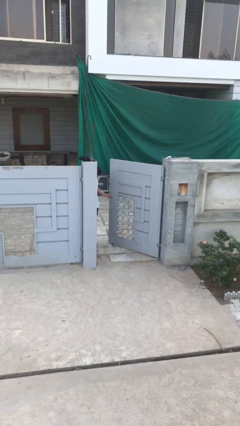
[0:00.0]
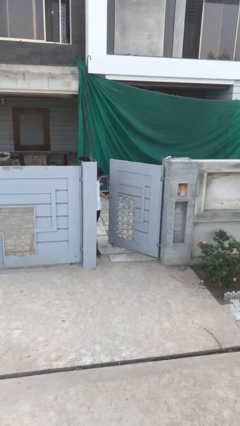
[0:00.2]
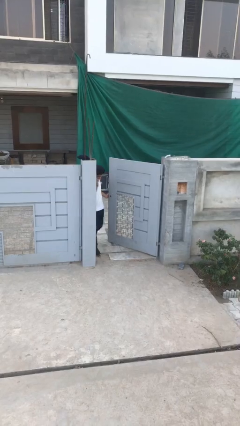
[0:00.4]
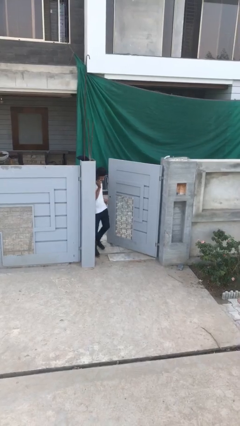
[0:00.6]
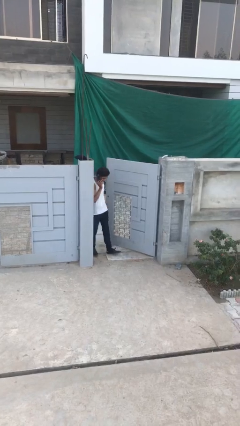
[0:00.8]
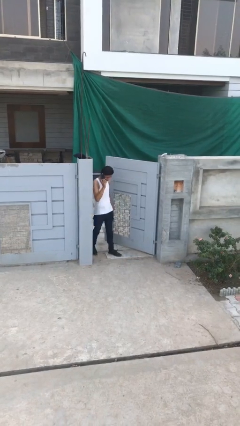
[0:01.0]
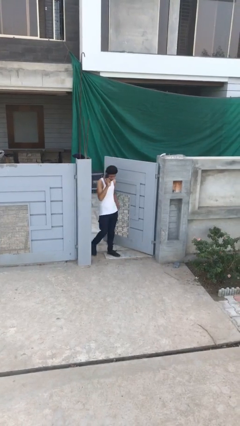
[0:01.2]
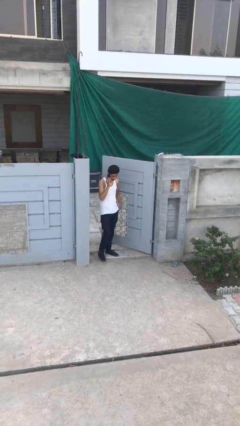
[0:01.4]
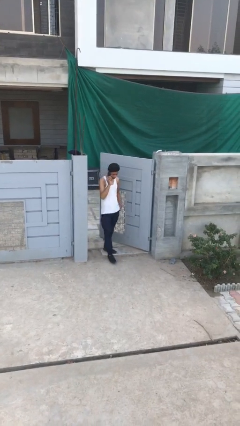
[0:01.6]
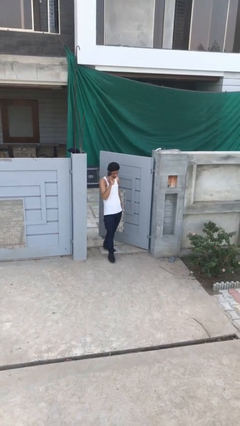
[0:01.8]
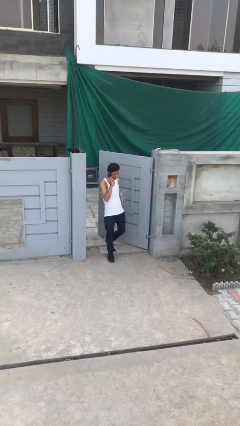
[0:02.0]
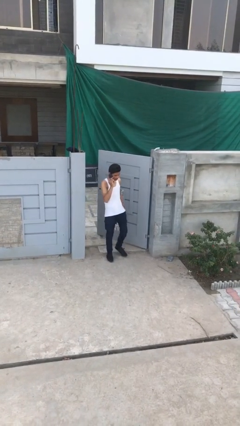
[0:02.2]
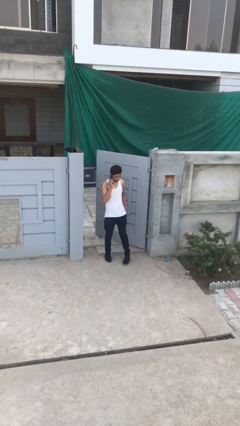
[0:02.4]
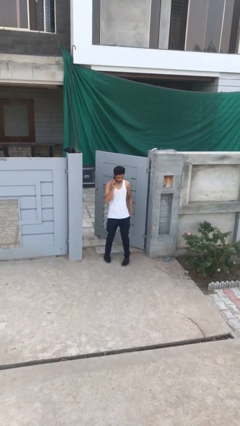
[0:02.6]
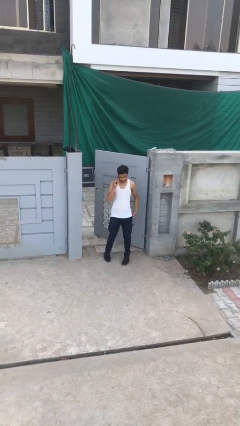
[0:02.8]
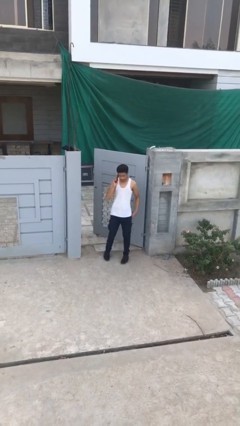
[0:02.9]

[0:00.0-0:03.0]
person enters scene through structure

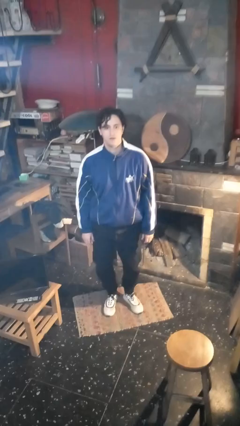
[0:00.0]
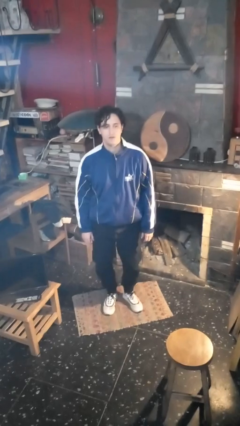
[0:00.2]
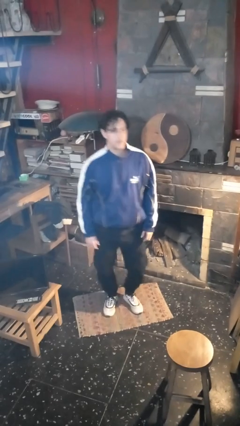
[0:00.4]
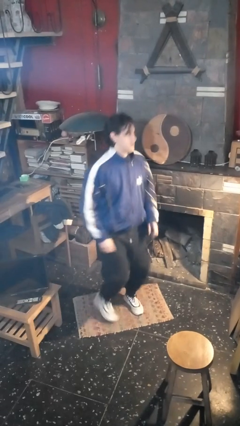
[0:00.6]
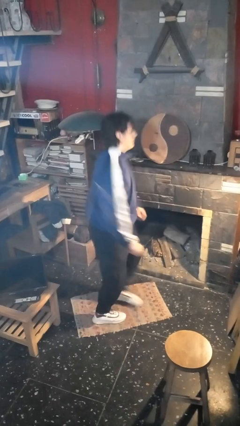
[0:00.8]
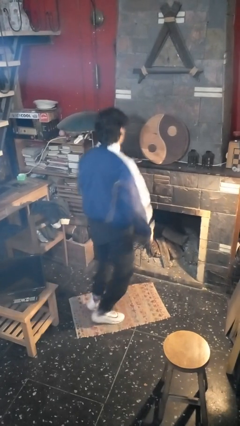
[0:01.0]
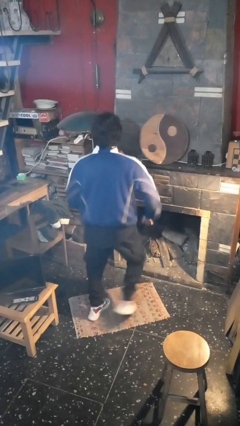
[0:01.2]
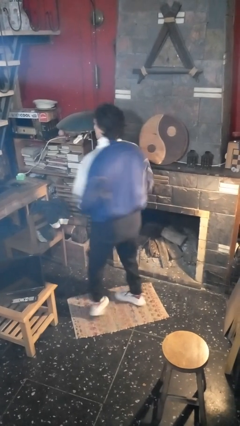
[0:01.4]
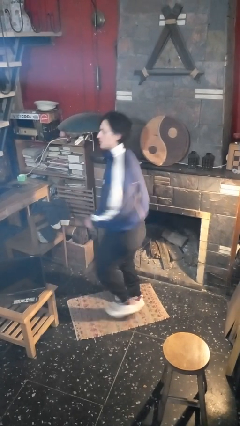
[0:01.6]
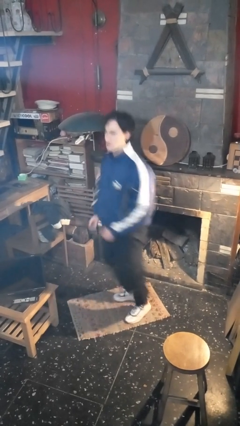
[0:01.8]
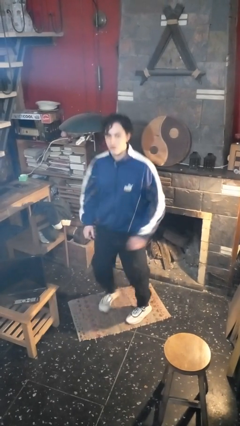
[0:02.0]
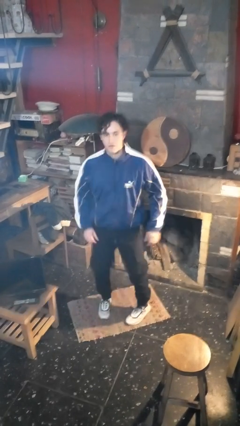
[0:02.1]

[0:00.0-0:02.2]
person twirls

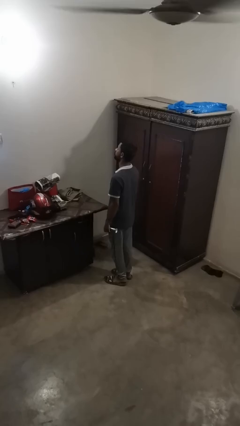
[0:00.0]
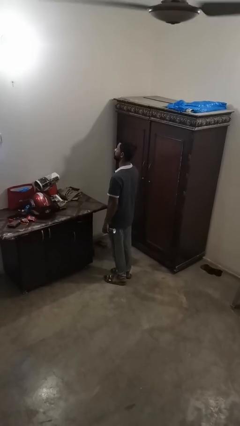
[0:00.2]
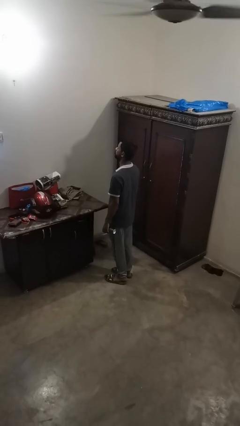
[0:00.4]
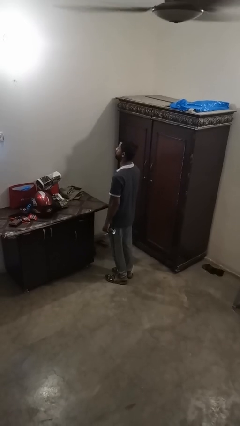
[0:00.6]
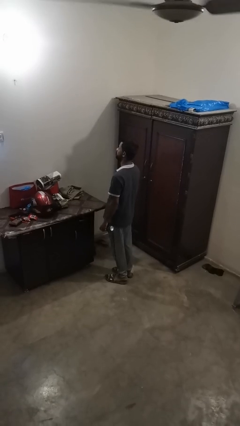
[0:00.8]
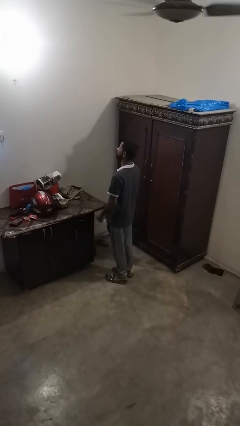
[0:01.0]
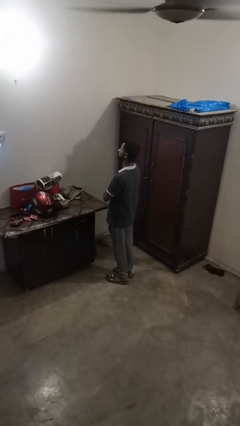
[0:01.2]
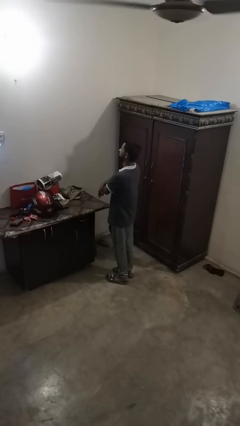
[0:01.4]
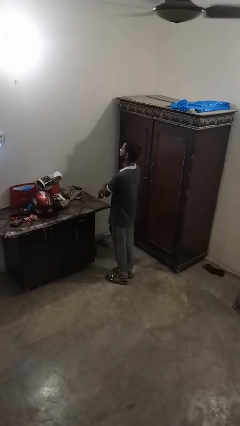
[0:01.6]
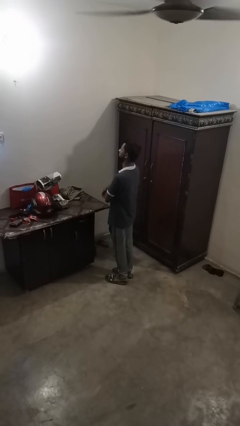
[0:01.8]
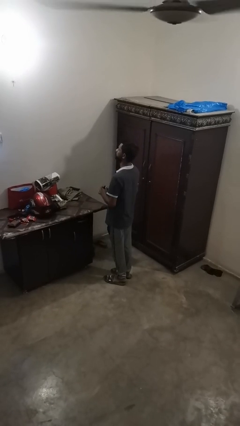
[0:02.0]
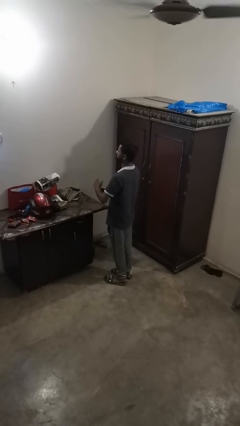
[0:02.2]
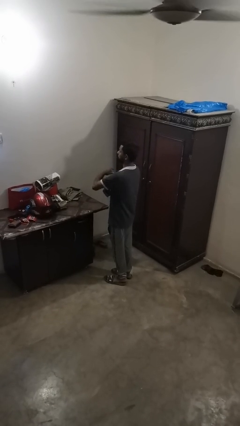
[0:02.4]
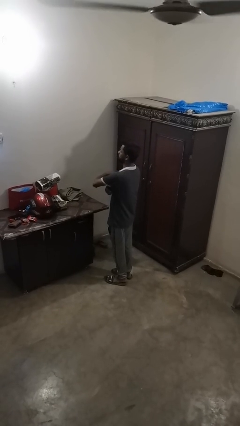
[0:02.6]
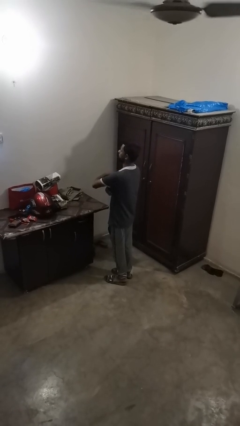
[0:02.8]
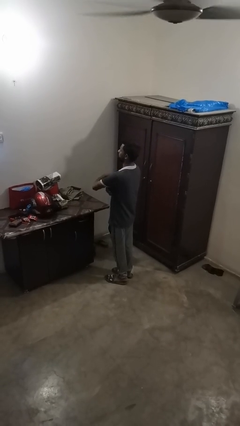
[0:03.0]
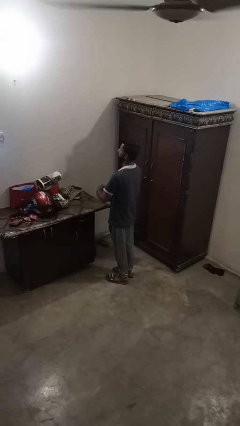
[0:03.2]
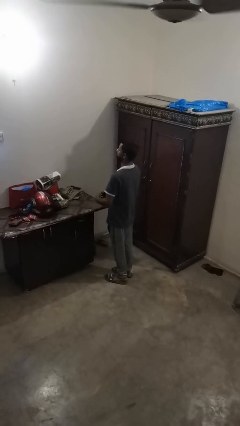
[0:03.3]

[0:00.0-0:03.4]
person applies deodorant

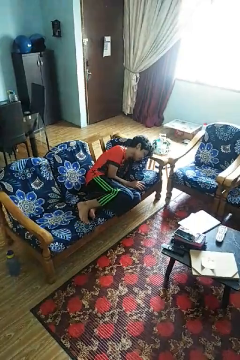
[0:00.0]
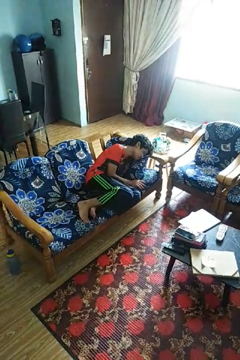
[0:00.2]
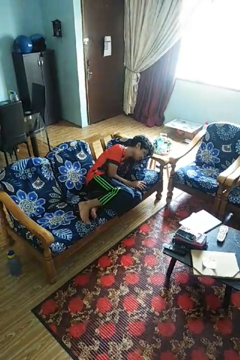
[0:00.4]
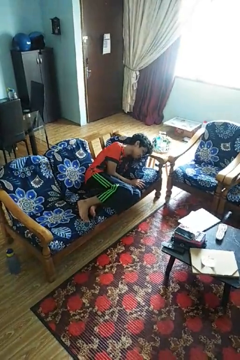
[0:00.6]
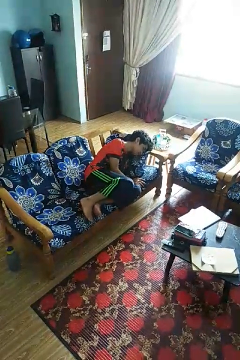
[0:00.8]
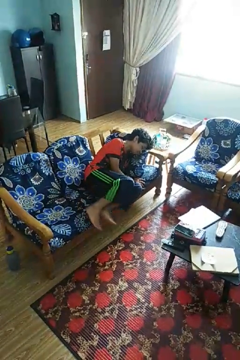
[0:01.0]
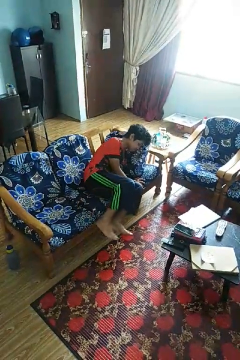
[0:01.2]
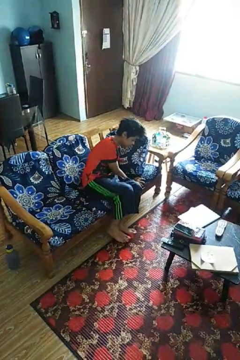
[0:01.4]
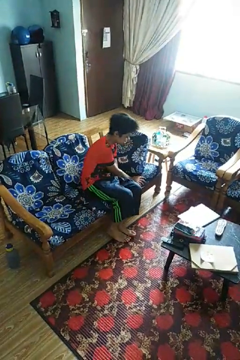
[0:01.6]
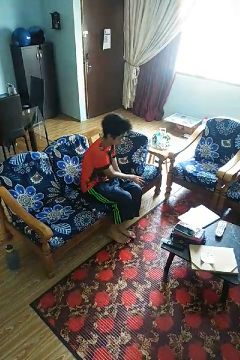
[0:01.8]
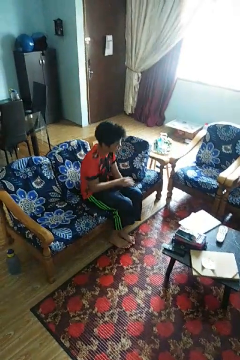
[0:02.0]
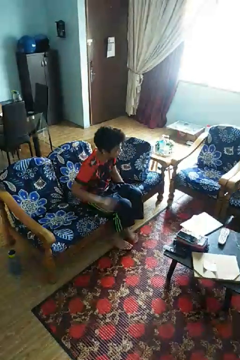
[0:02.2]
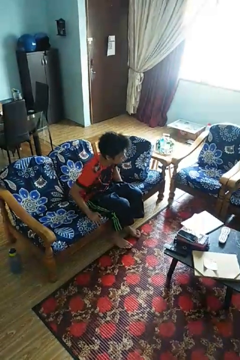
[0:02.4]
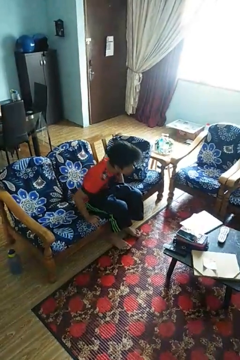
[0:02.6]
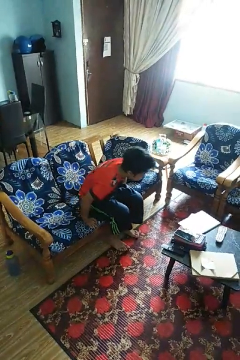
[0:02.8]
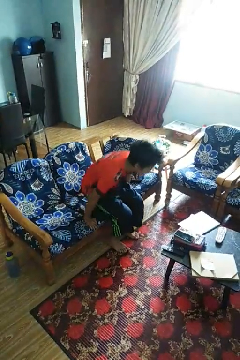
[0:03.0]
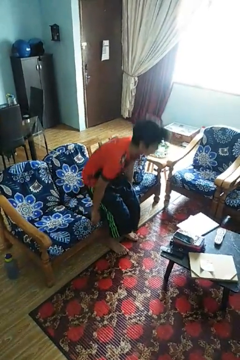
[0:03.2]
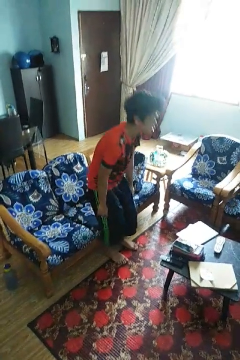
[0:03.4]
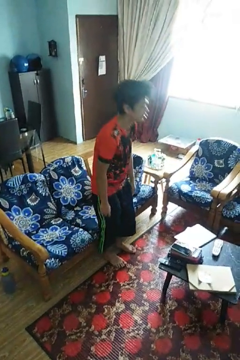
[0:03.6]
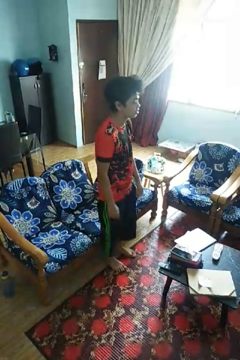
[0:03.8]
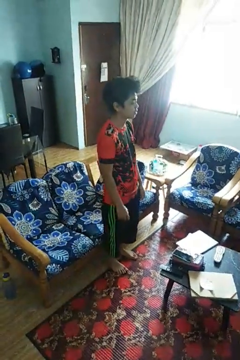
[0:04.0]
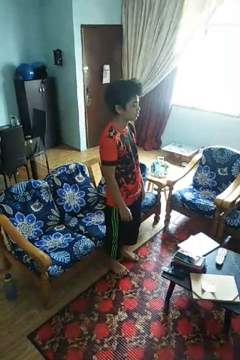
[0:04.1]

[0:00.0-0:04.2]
person stands up

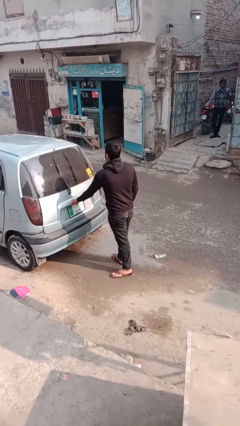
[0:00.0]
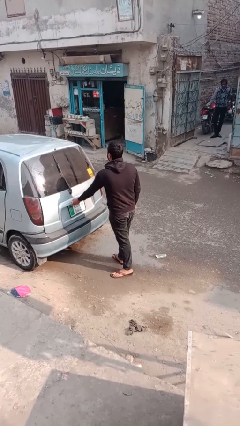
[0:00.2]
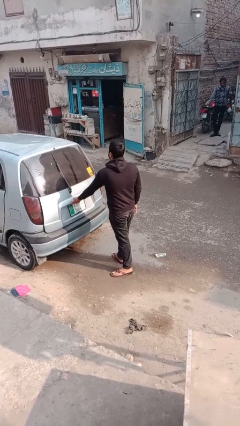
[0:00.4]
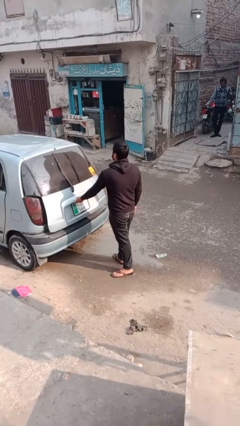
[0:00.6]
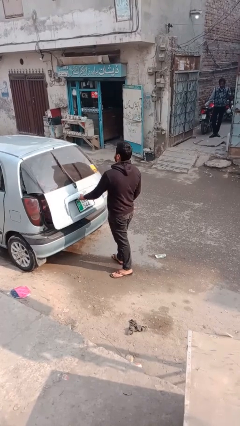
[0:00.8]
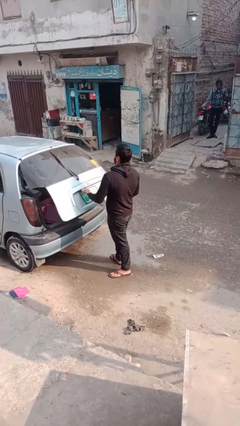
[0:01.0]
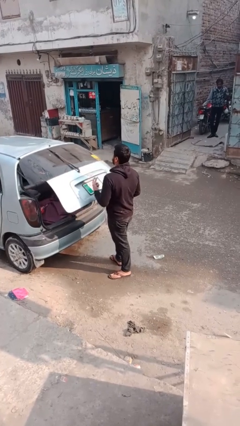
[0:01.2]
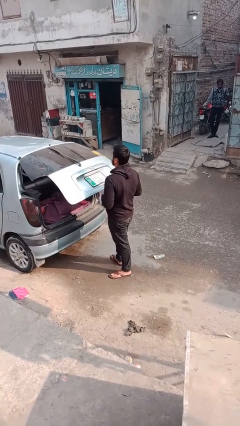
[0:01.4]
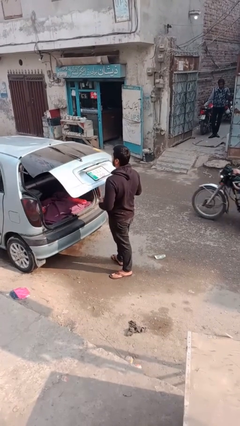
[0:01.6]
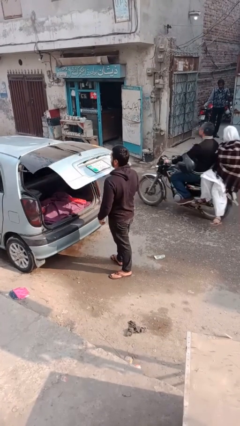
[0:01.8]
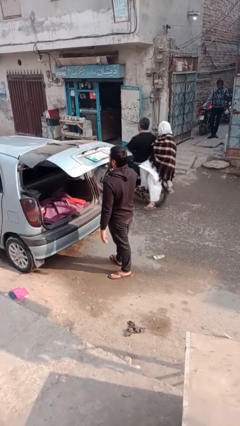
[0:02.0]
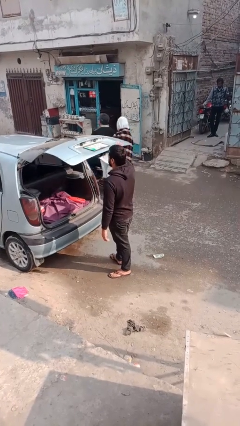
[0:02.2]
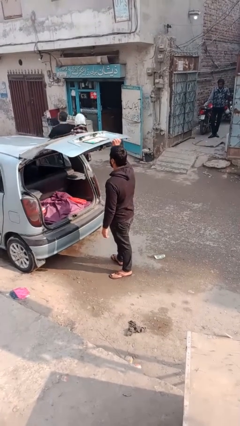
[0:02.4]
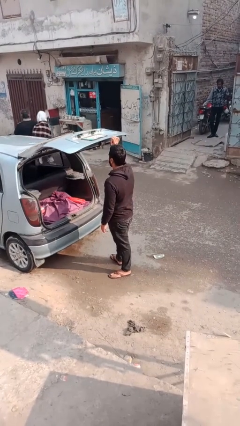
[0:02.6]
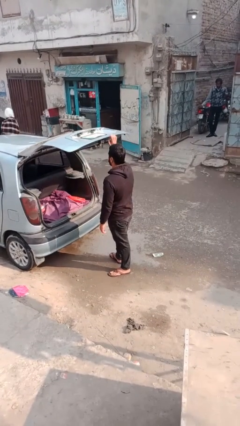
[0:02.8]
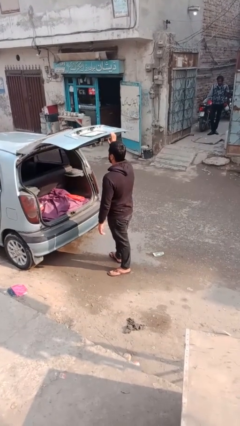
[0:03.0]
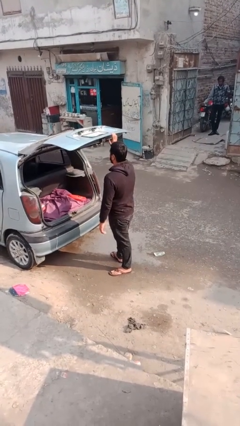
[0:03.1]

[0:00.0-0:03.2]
person opens car trunk

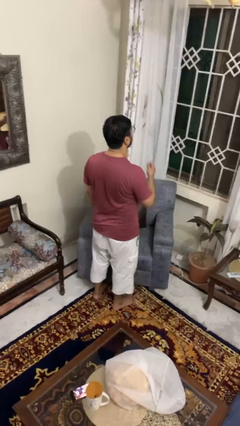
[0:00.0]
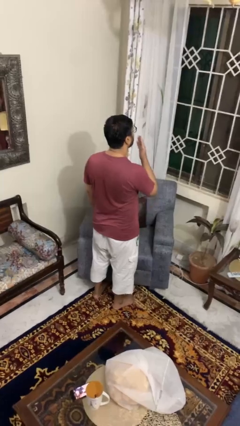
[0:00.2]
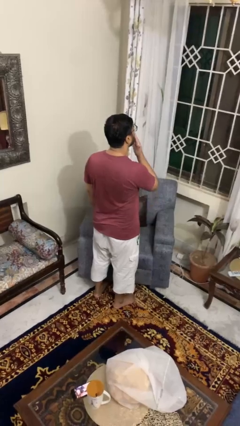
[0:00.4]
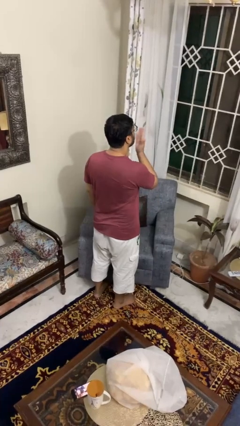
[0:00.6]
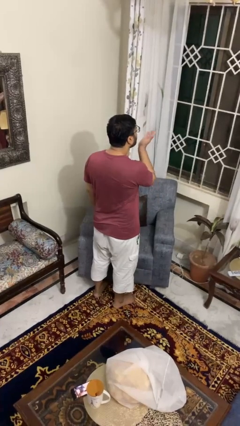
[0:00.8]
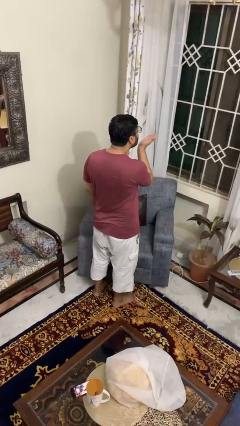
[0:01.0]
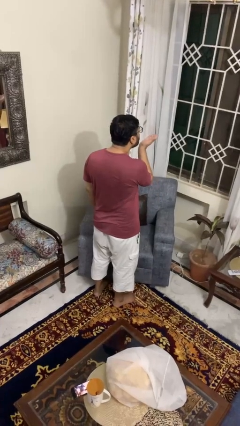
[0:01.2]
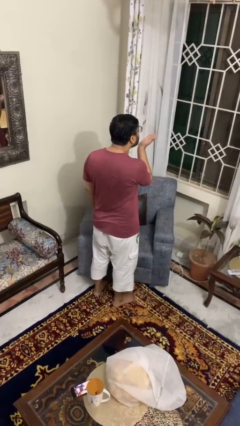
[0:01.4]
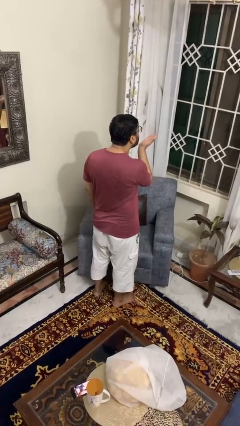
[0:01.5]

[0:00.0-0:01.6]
person gestures blow kiss
